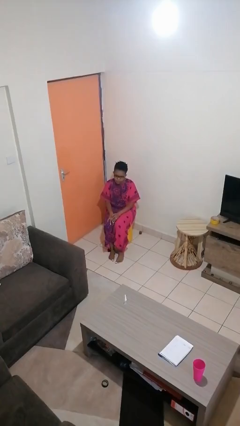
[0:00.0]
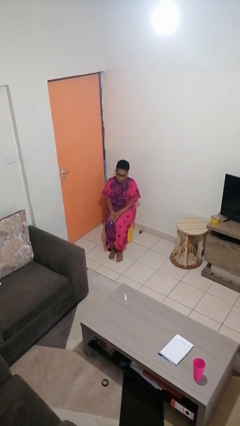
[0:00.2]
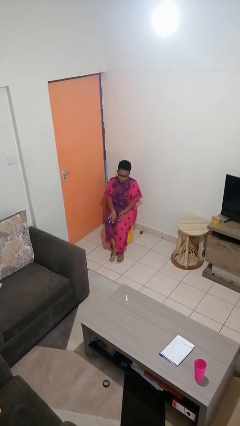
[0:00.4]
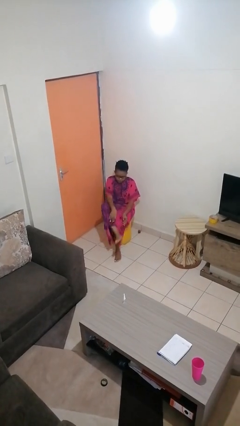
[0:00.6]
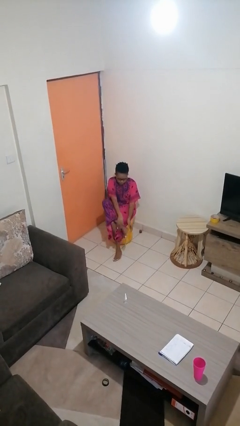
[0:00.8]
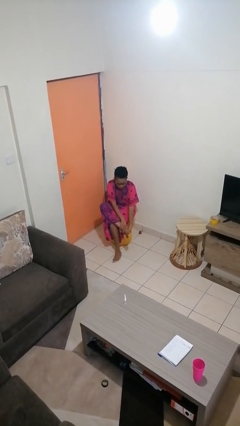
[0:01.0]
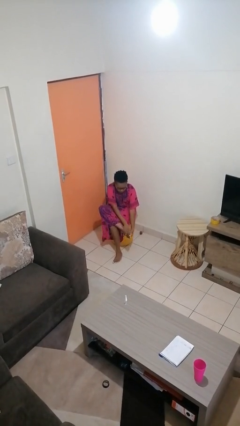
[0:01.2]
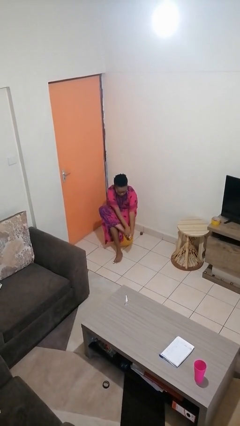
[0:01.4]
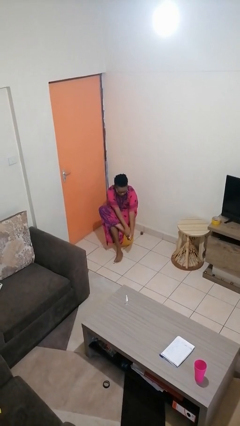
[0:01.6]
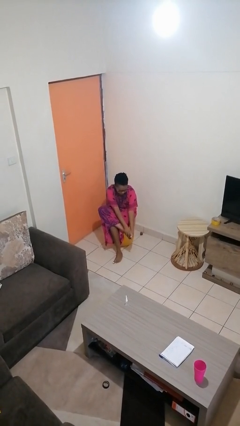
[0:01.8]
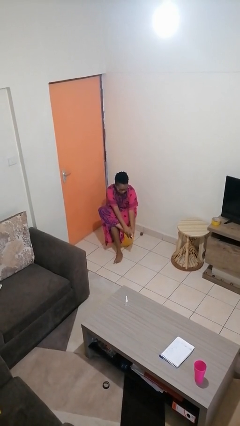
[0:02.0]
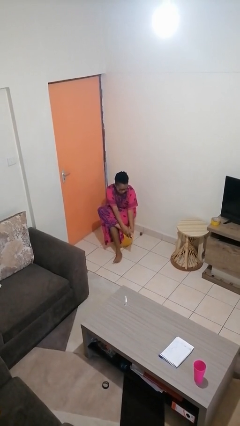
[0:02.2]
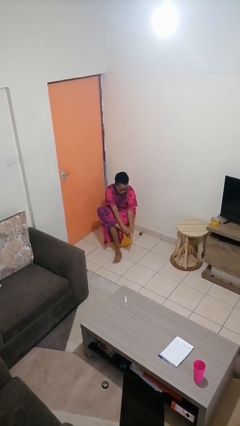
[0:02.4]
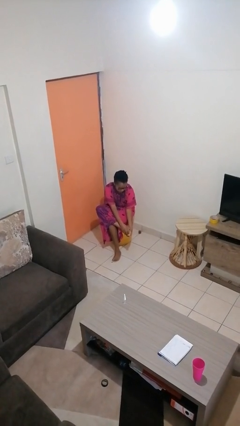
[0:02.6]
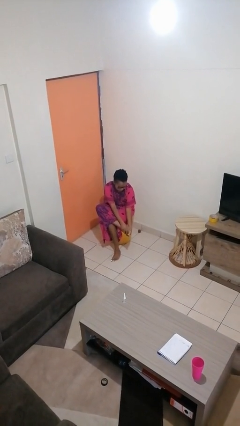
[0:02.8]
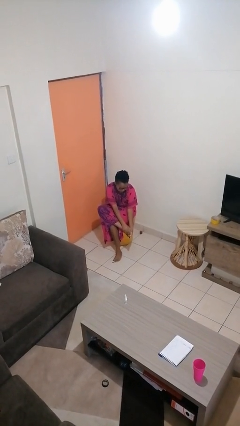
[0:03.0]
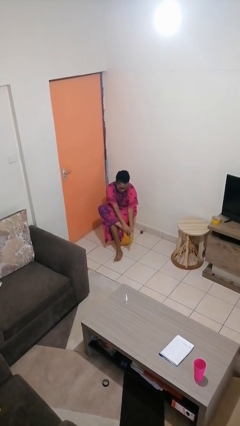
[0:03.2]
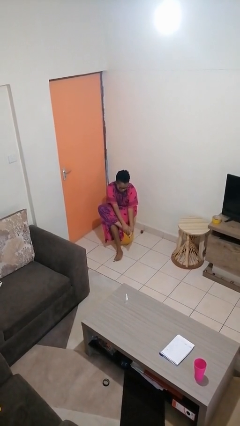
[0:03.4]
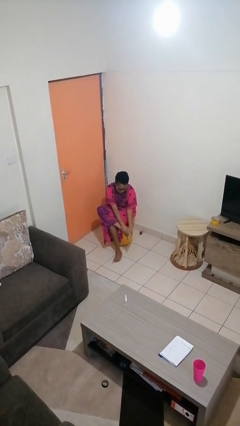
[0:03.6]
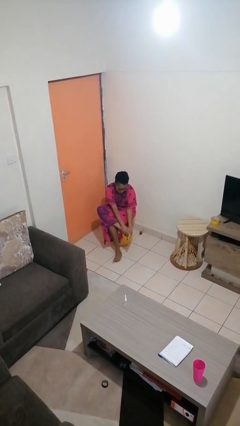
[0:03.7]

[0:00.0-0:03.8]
person rubs foot

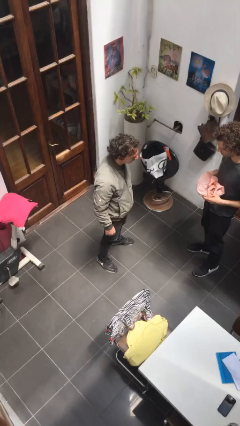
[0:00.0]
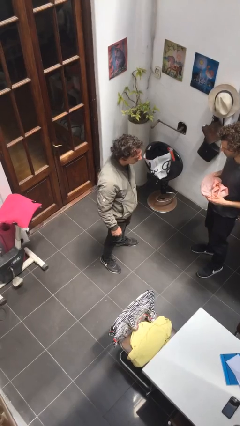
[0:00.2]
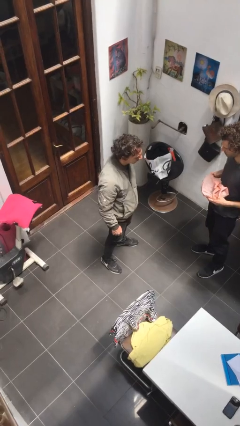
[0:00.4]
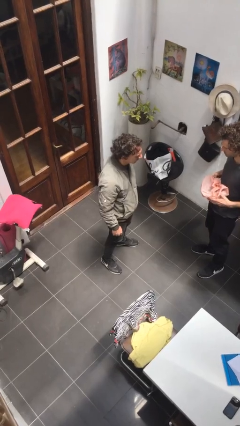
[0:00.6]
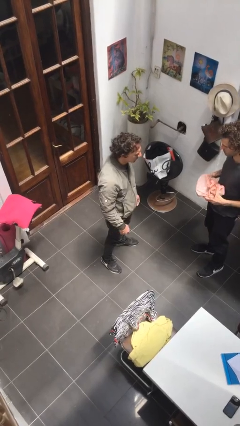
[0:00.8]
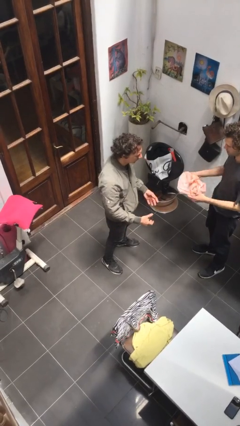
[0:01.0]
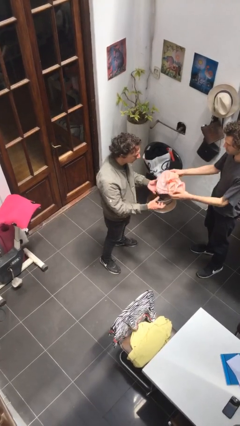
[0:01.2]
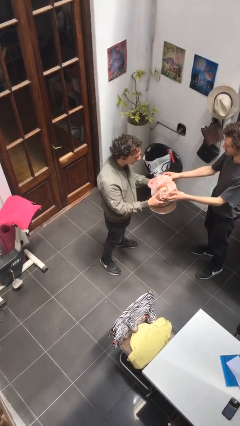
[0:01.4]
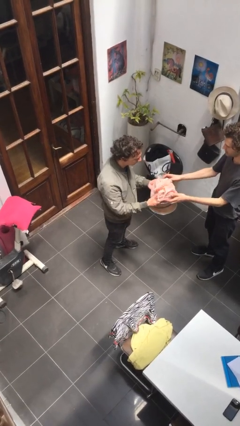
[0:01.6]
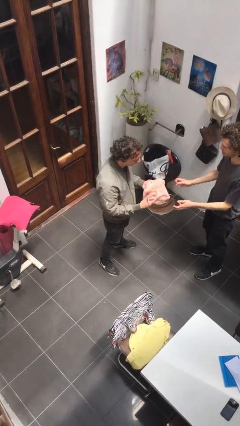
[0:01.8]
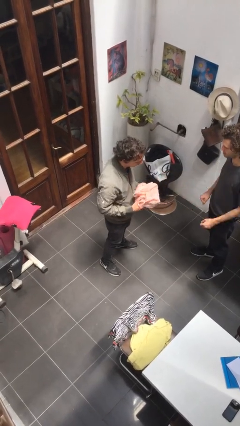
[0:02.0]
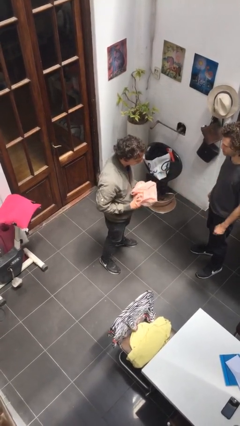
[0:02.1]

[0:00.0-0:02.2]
person transfers object to person

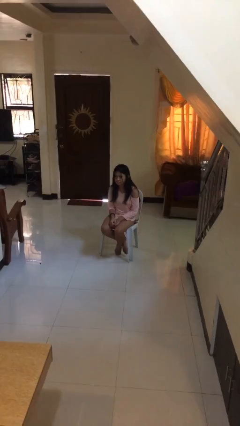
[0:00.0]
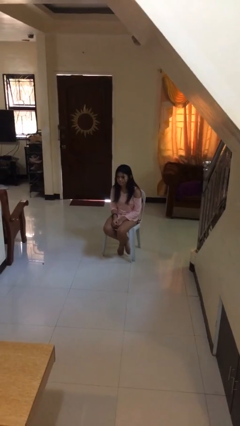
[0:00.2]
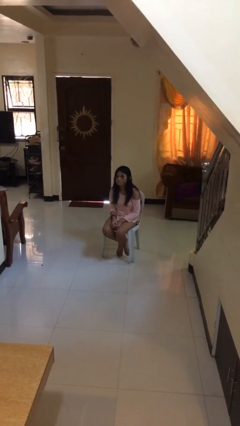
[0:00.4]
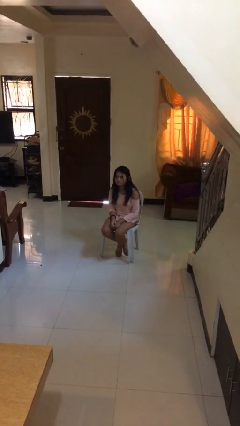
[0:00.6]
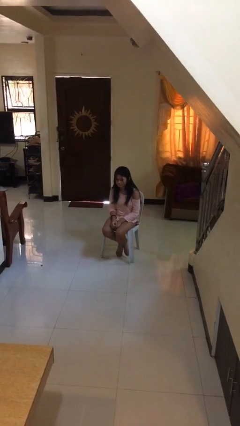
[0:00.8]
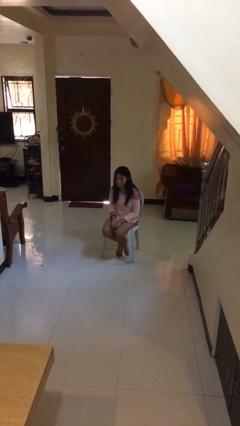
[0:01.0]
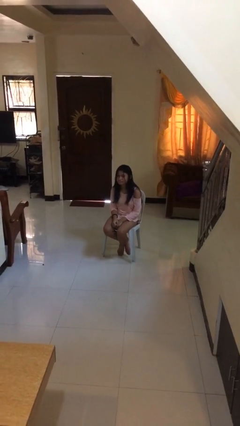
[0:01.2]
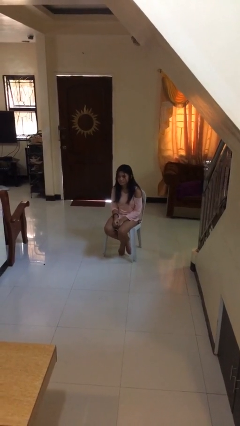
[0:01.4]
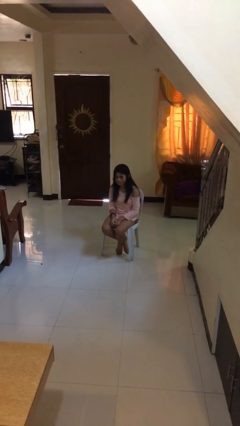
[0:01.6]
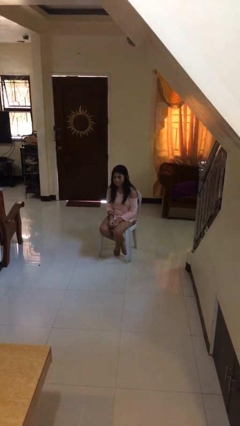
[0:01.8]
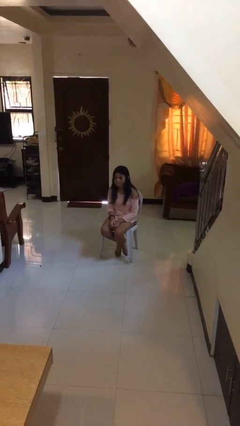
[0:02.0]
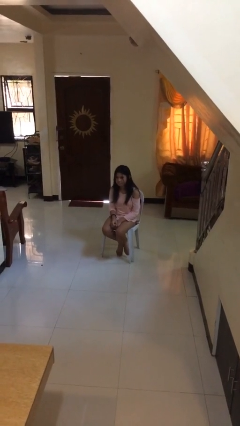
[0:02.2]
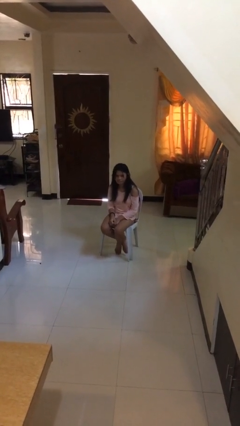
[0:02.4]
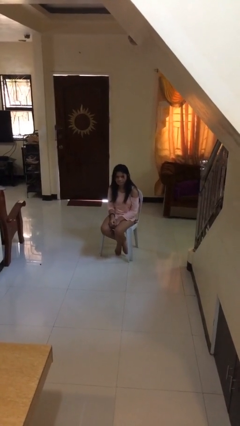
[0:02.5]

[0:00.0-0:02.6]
person nods head

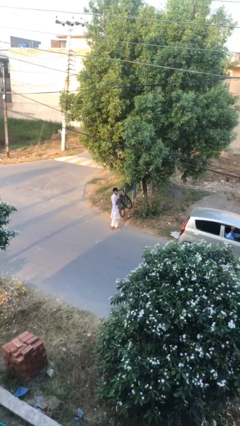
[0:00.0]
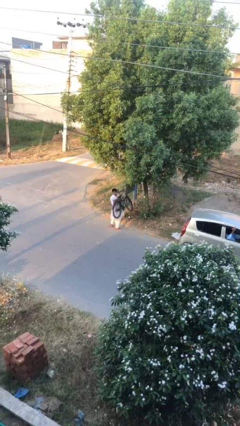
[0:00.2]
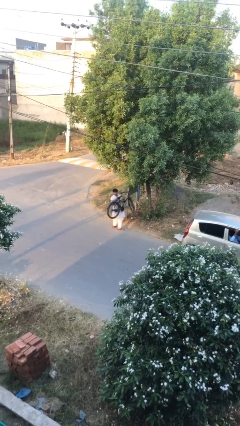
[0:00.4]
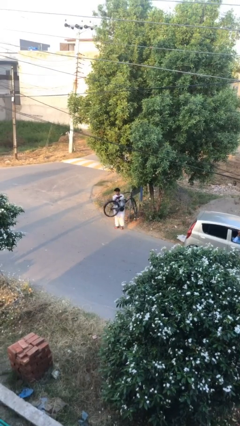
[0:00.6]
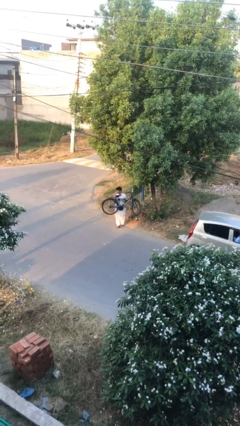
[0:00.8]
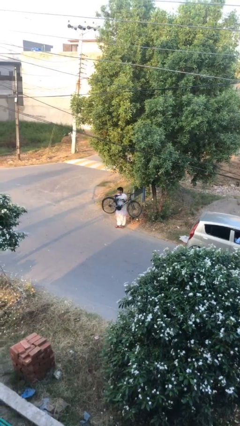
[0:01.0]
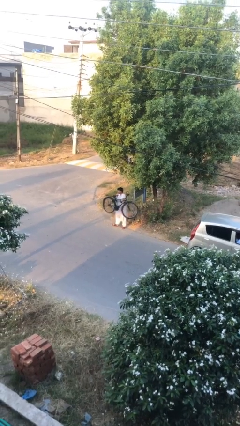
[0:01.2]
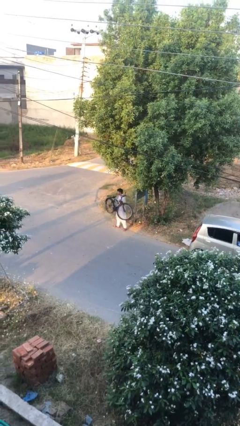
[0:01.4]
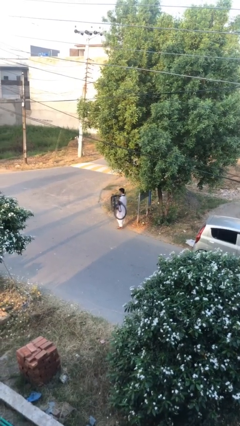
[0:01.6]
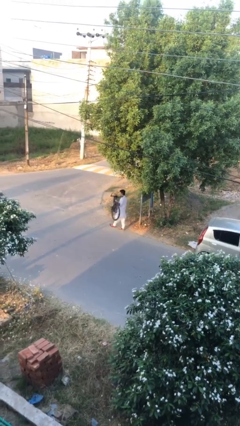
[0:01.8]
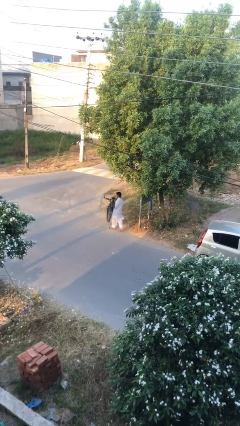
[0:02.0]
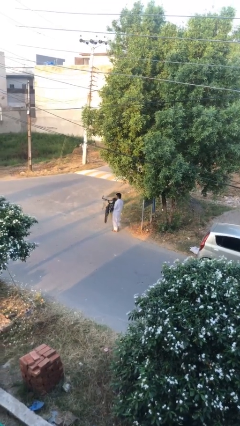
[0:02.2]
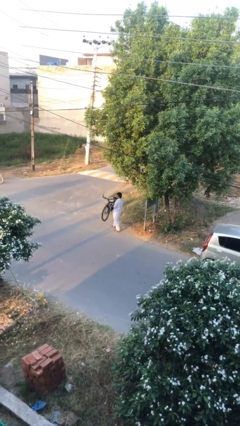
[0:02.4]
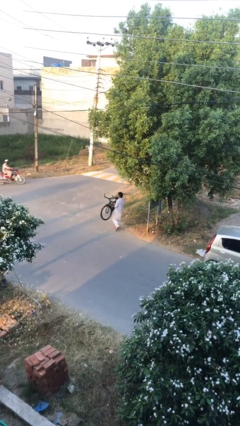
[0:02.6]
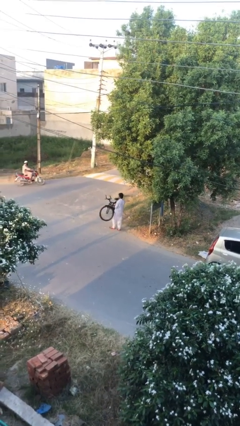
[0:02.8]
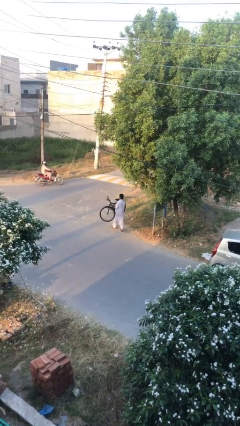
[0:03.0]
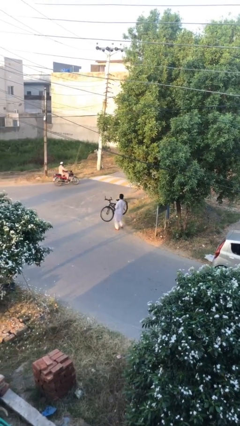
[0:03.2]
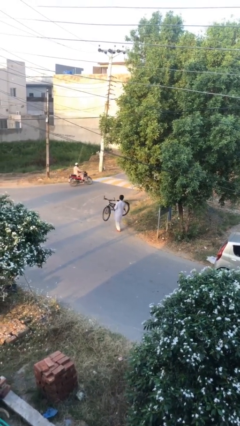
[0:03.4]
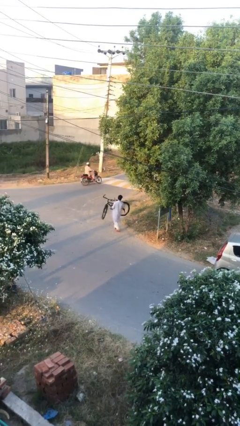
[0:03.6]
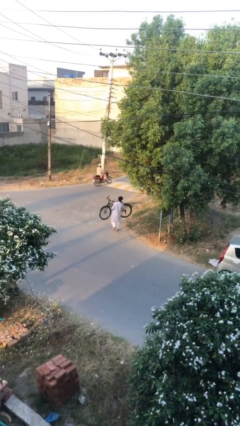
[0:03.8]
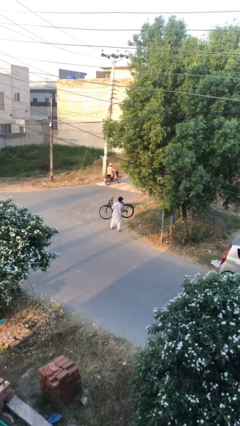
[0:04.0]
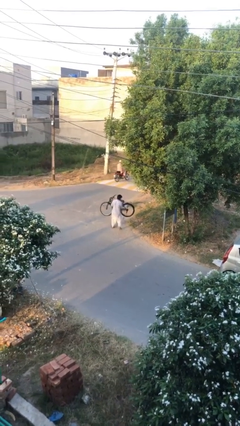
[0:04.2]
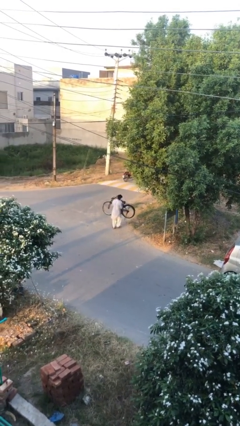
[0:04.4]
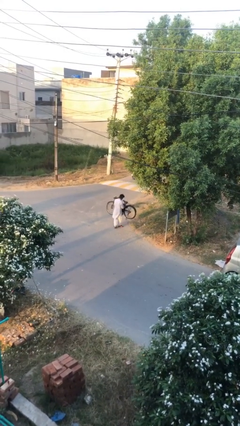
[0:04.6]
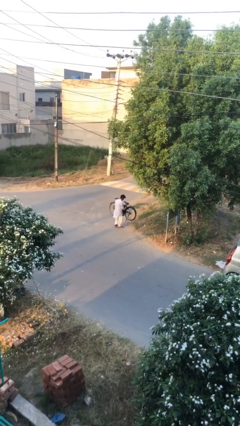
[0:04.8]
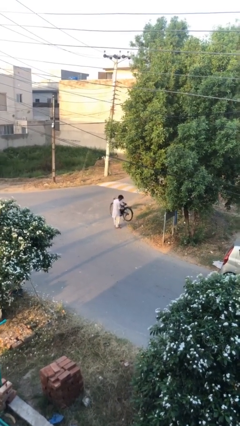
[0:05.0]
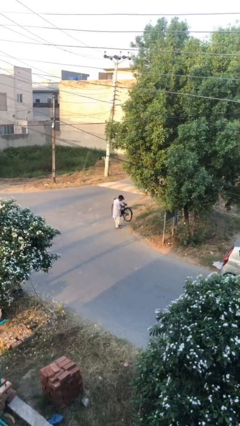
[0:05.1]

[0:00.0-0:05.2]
person carries heavy object

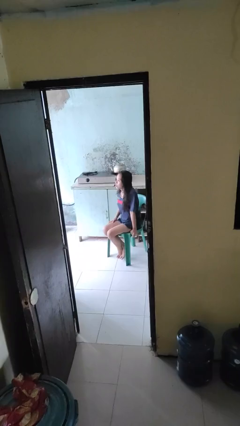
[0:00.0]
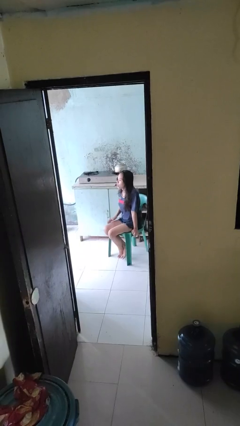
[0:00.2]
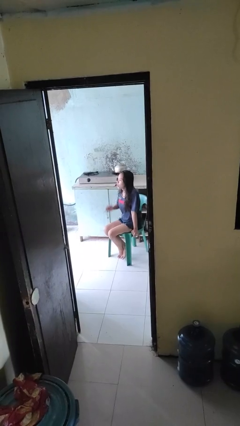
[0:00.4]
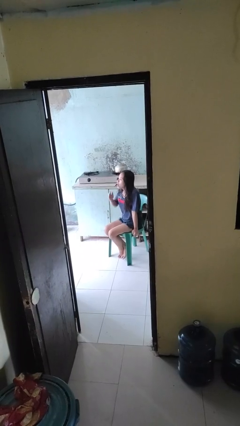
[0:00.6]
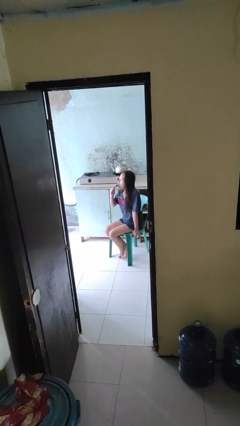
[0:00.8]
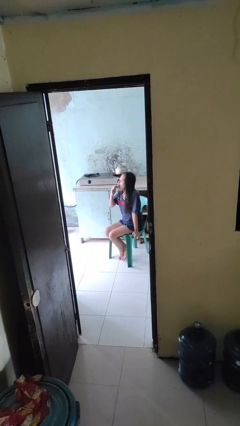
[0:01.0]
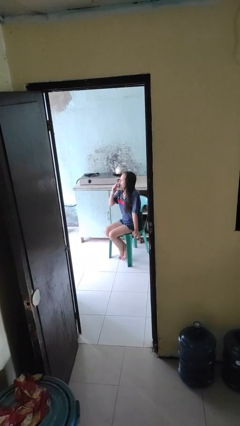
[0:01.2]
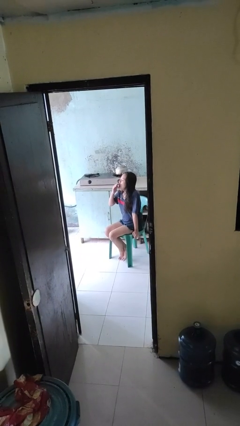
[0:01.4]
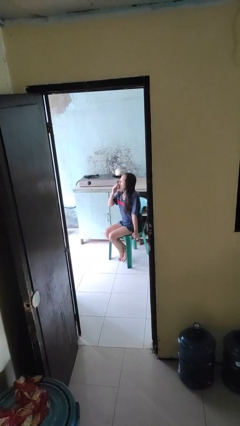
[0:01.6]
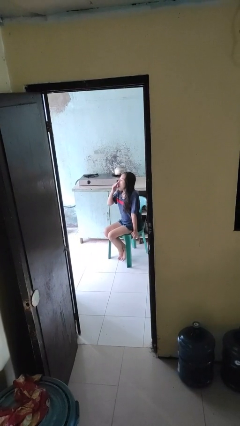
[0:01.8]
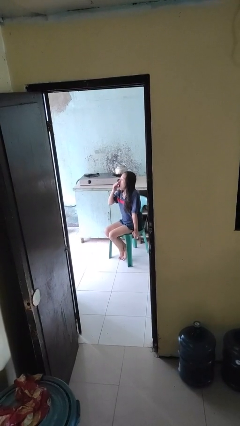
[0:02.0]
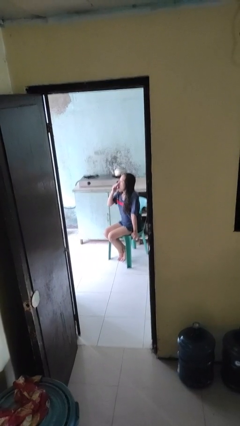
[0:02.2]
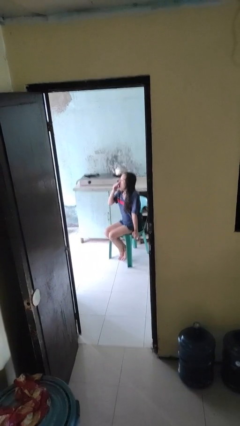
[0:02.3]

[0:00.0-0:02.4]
person yawns

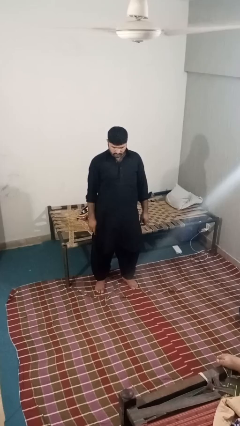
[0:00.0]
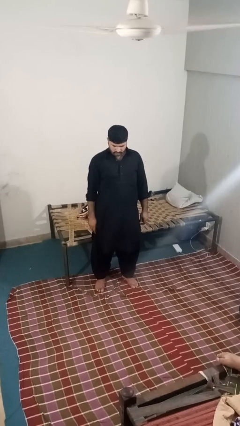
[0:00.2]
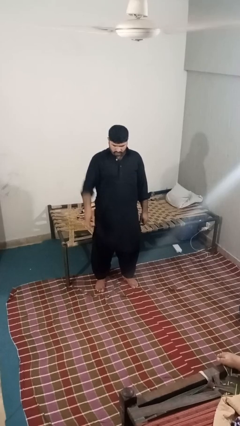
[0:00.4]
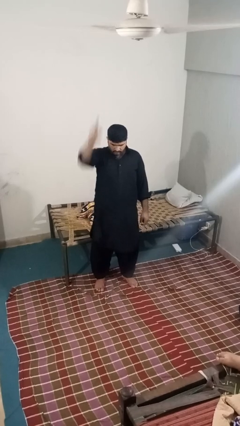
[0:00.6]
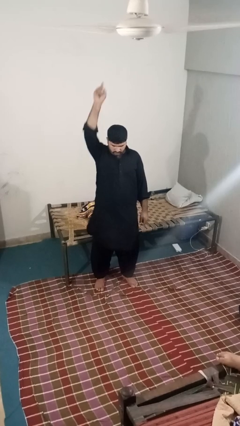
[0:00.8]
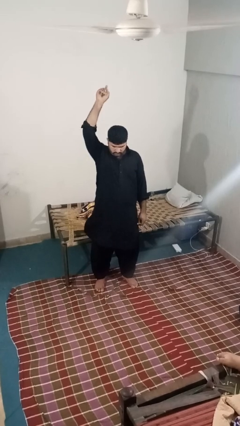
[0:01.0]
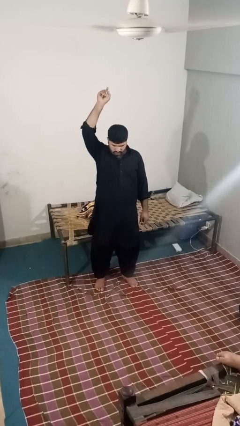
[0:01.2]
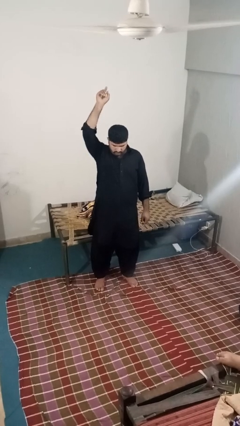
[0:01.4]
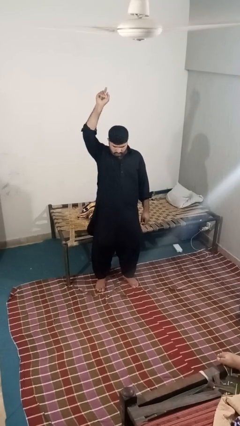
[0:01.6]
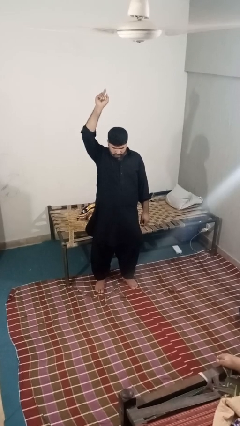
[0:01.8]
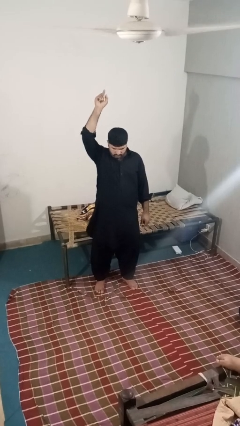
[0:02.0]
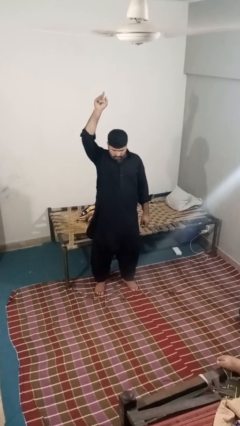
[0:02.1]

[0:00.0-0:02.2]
person gestures swipe up
